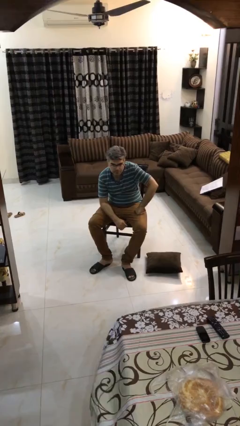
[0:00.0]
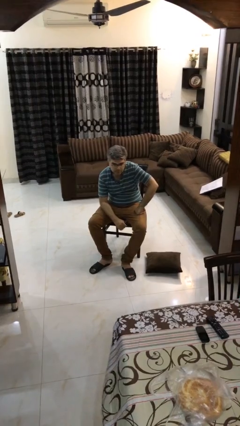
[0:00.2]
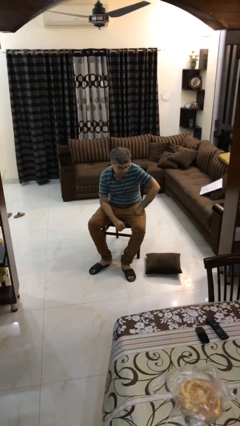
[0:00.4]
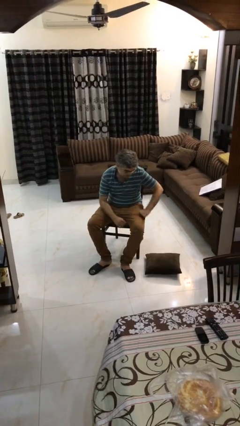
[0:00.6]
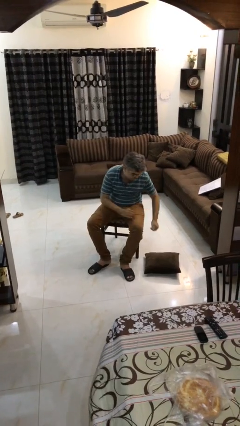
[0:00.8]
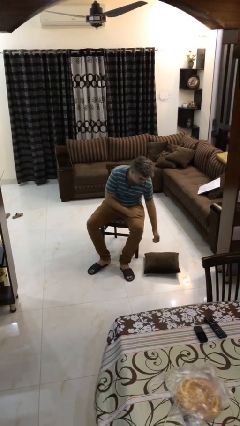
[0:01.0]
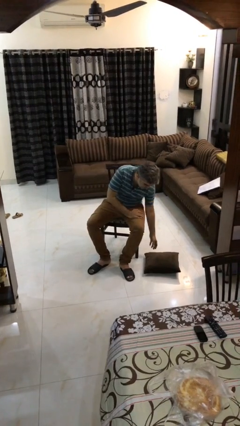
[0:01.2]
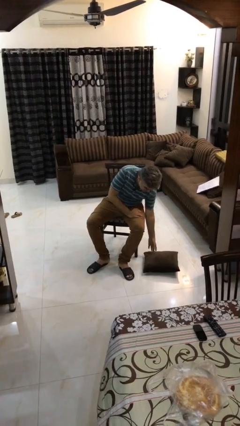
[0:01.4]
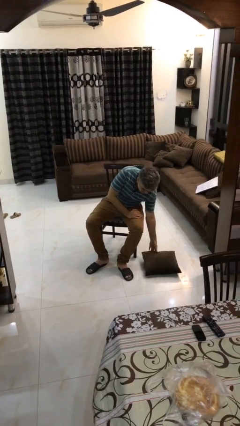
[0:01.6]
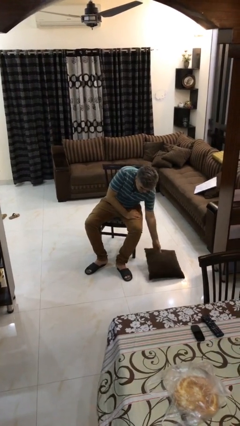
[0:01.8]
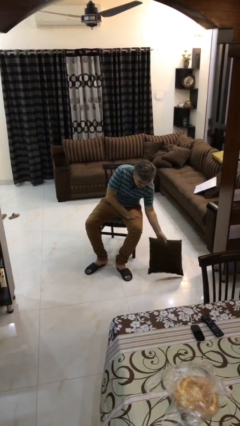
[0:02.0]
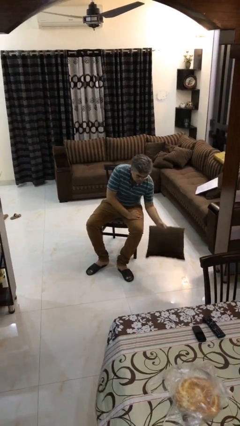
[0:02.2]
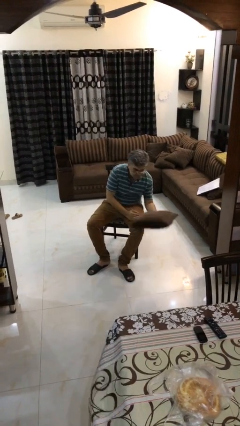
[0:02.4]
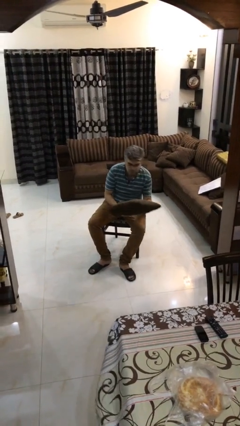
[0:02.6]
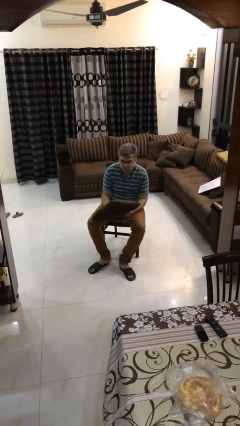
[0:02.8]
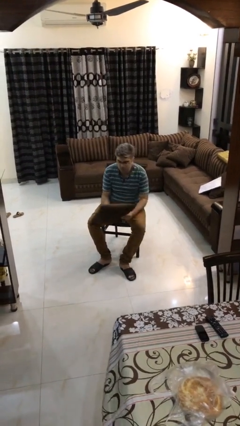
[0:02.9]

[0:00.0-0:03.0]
person picks up object from floor

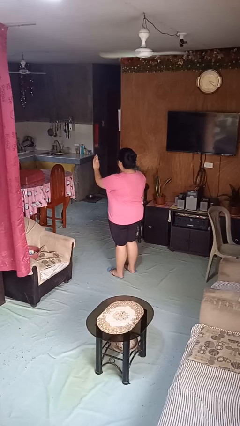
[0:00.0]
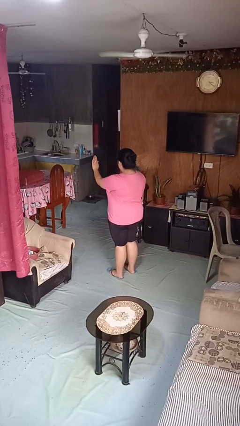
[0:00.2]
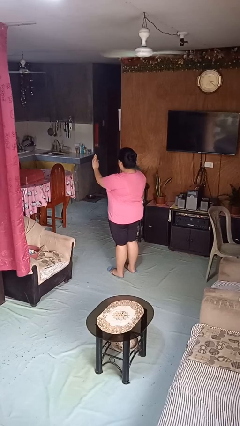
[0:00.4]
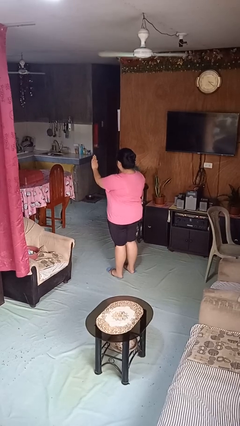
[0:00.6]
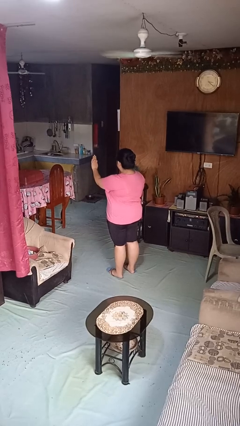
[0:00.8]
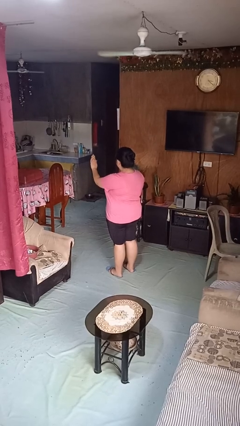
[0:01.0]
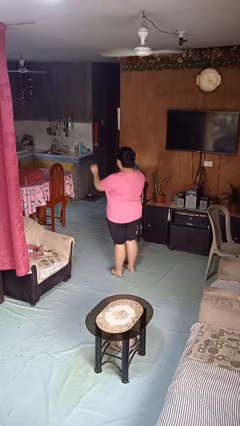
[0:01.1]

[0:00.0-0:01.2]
person gestures stop

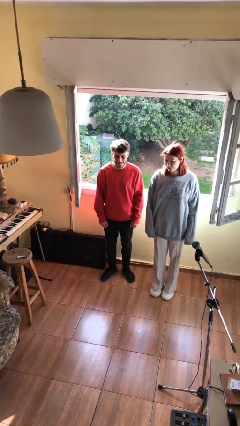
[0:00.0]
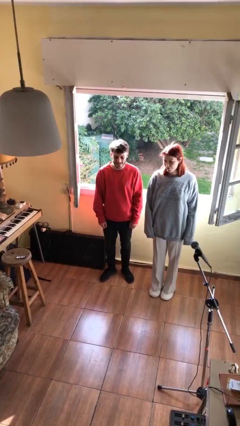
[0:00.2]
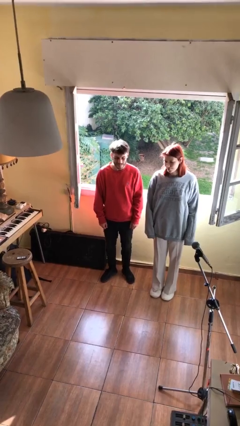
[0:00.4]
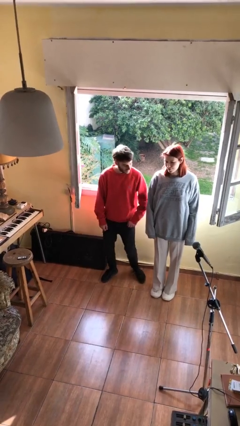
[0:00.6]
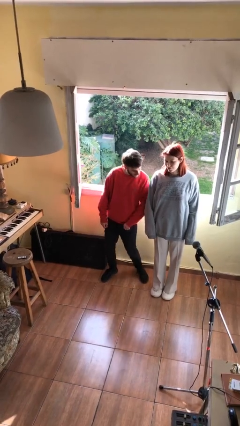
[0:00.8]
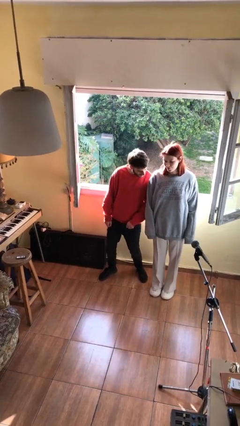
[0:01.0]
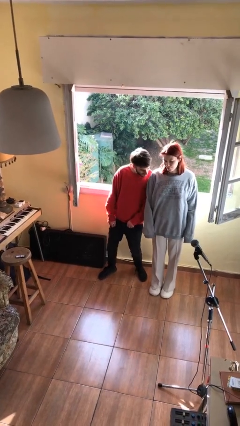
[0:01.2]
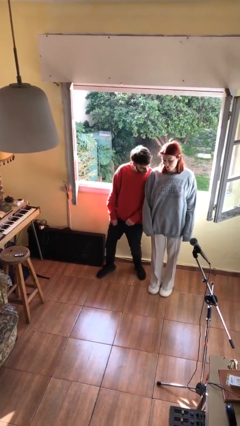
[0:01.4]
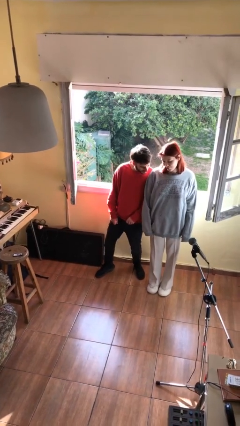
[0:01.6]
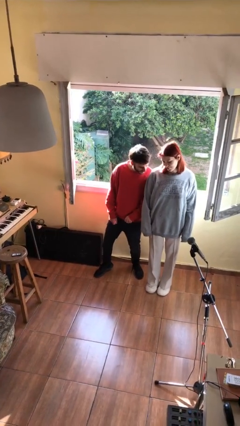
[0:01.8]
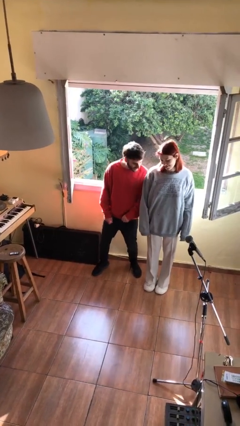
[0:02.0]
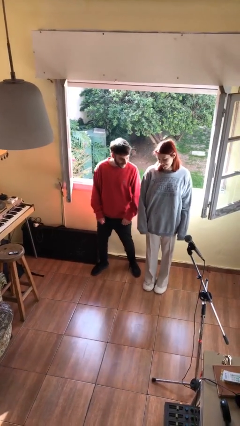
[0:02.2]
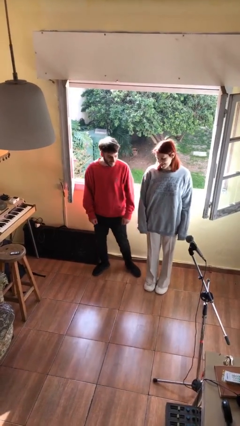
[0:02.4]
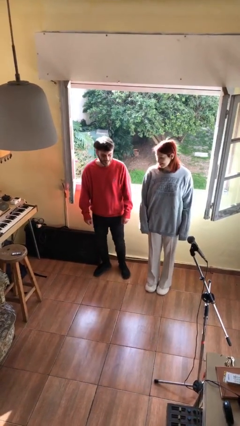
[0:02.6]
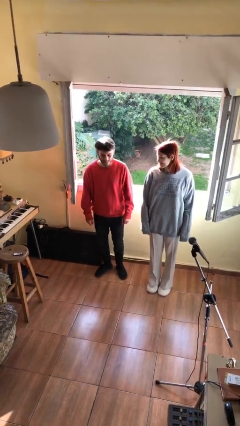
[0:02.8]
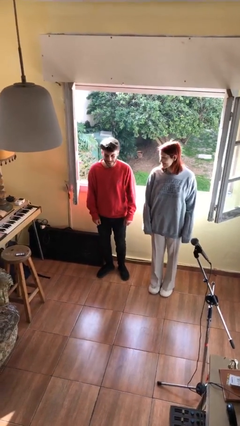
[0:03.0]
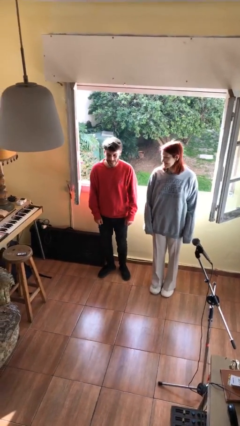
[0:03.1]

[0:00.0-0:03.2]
person nudges person with elbow

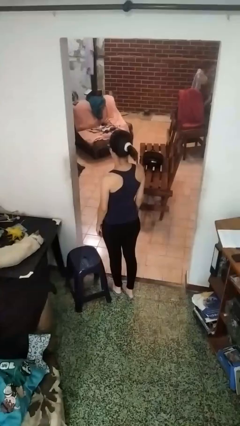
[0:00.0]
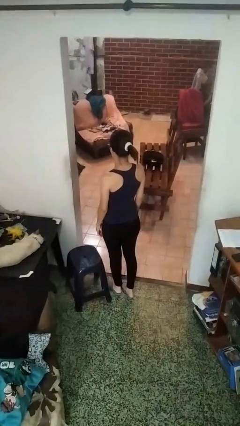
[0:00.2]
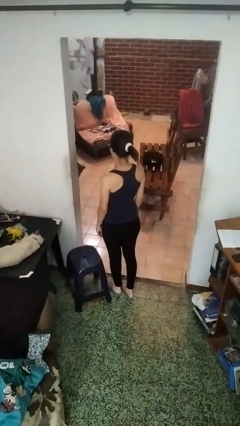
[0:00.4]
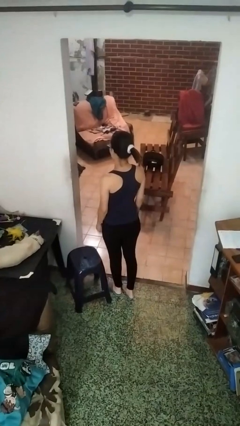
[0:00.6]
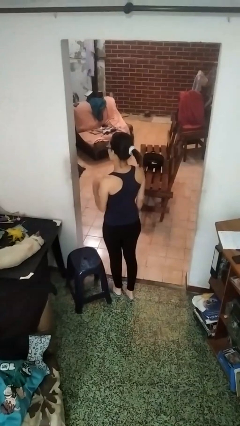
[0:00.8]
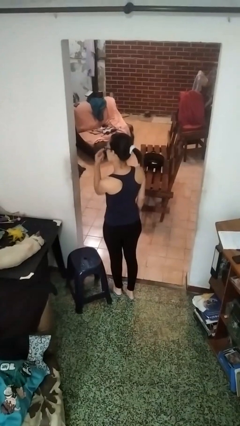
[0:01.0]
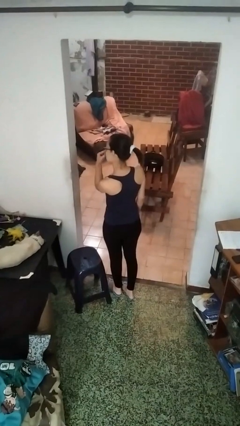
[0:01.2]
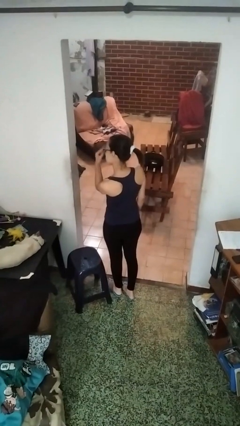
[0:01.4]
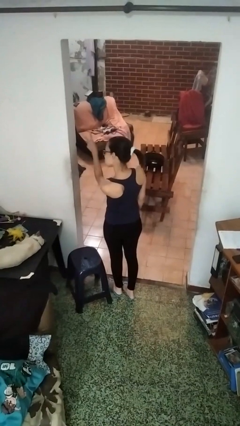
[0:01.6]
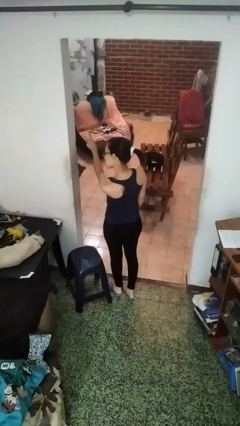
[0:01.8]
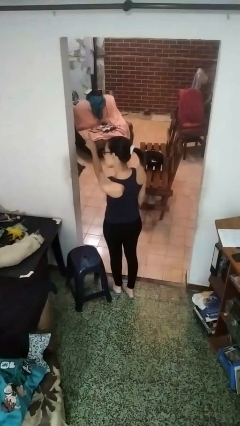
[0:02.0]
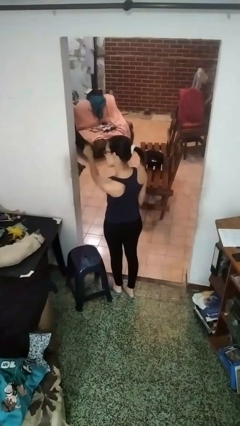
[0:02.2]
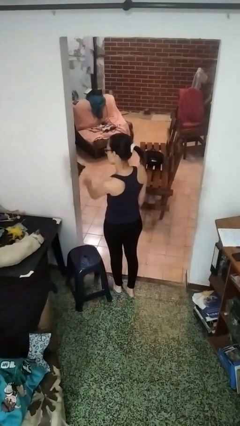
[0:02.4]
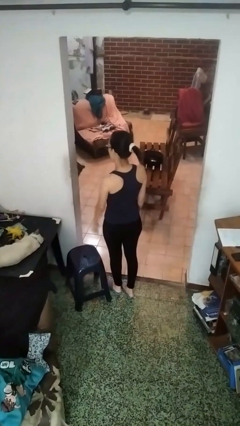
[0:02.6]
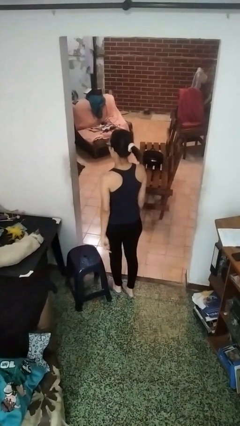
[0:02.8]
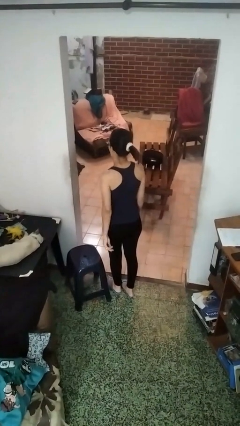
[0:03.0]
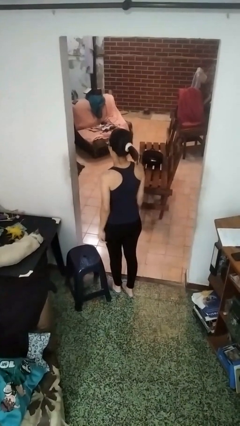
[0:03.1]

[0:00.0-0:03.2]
person gestures watch closely

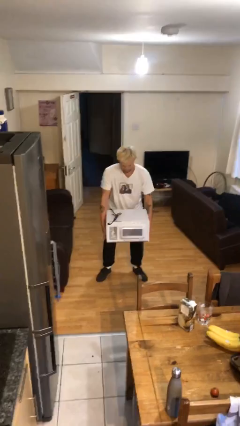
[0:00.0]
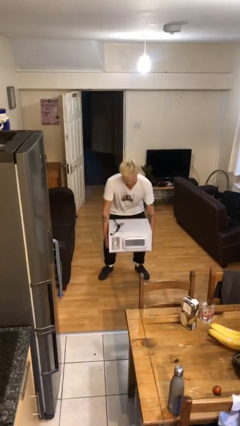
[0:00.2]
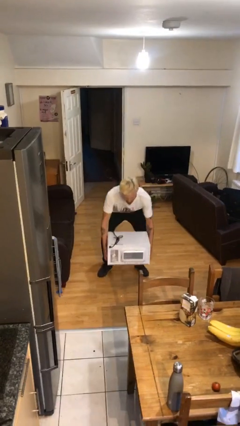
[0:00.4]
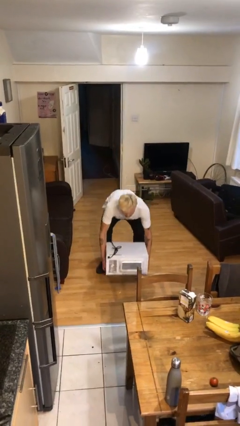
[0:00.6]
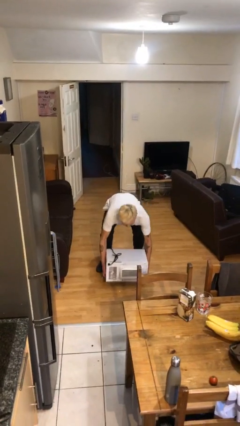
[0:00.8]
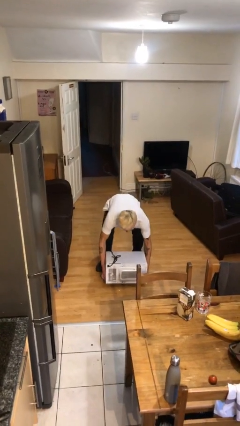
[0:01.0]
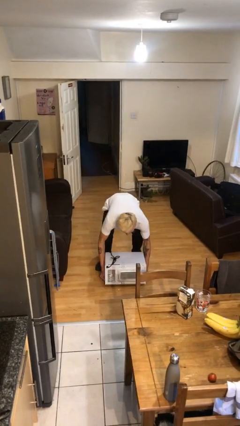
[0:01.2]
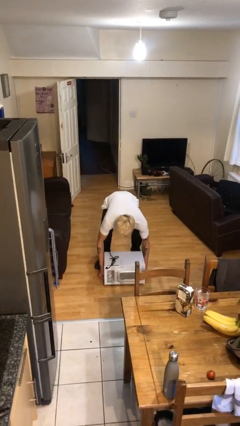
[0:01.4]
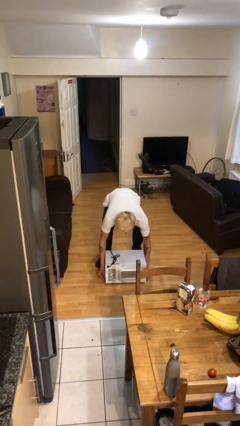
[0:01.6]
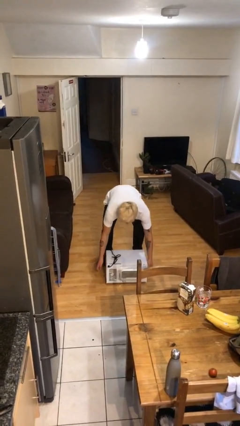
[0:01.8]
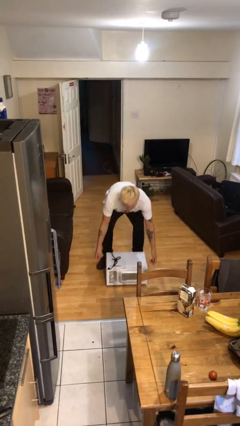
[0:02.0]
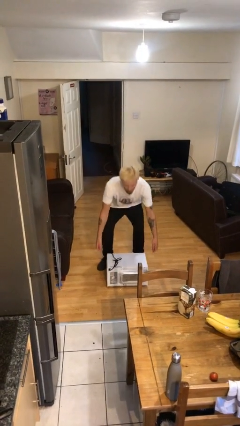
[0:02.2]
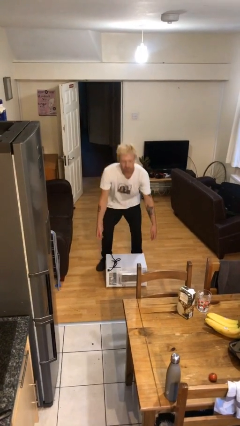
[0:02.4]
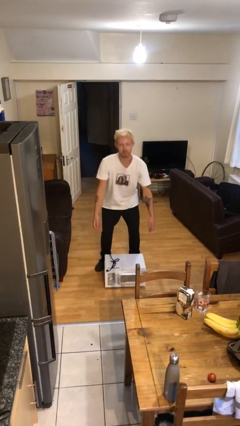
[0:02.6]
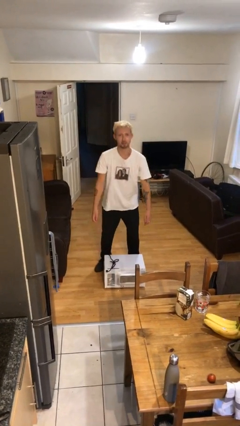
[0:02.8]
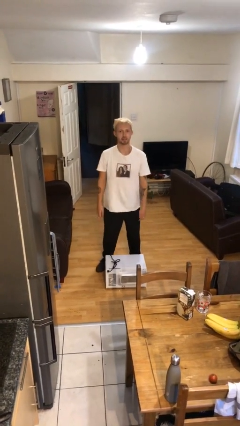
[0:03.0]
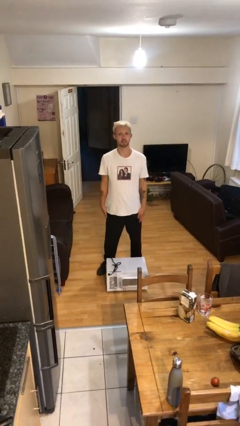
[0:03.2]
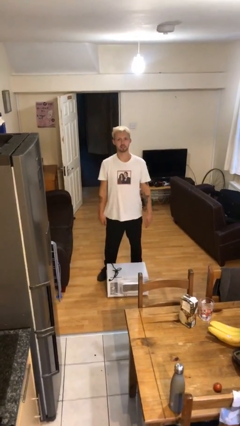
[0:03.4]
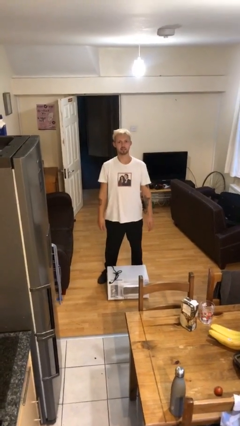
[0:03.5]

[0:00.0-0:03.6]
person puts down object on floor

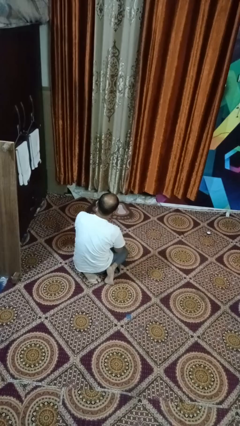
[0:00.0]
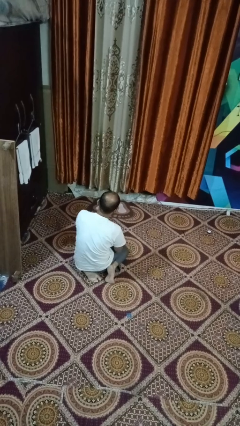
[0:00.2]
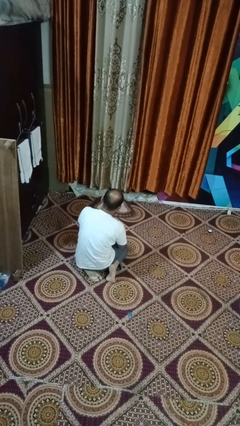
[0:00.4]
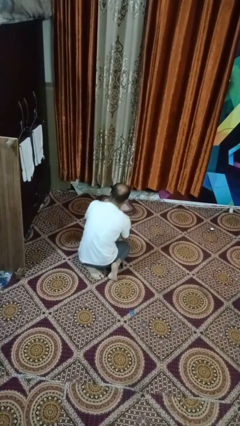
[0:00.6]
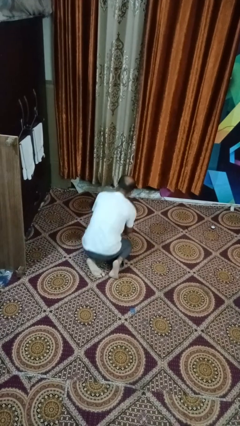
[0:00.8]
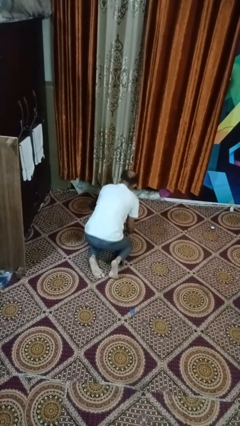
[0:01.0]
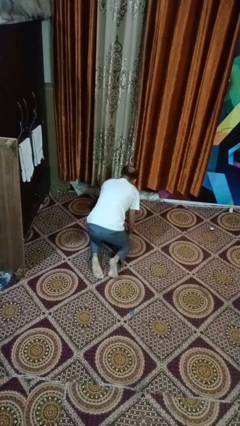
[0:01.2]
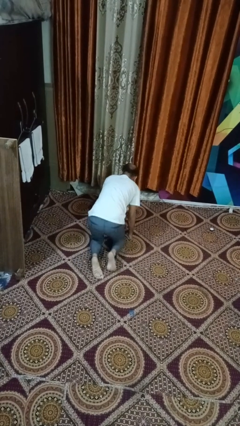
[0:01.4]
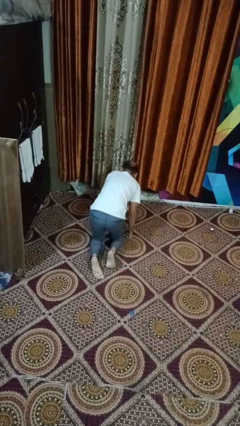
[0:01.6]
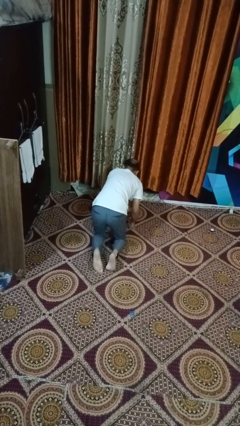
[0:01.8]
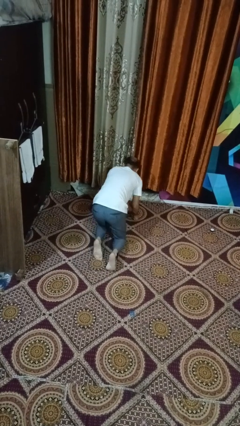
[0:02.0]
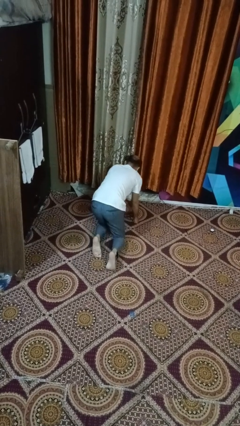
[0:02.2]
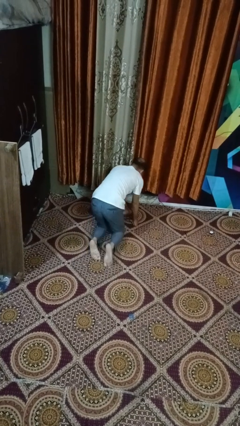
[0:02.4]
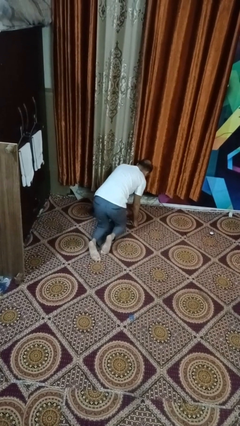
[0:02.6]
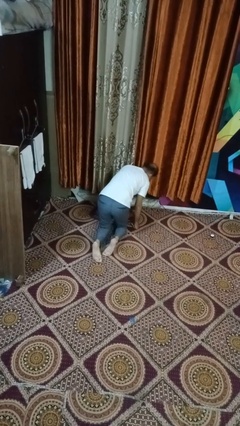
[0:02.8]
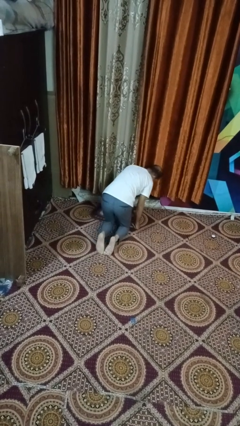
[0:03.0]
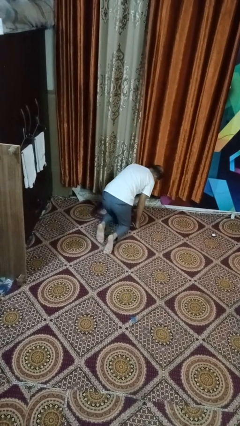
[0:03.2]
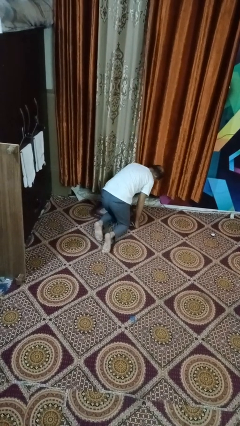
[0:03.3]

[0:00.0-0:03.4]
person crawls

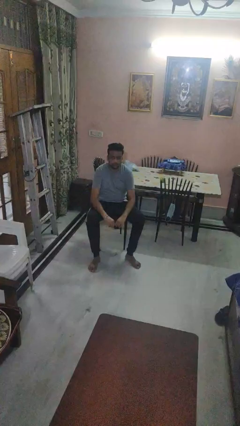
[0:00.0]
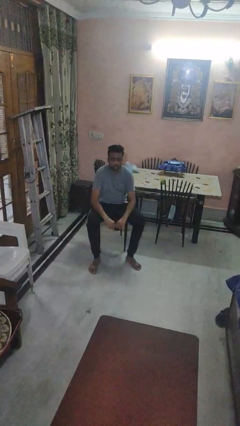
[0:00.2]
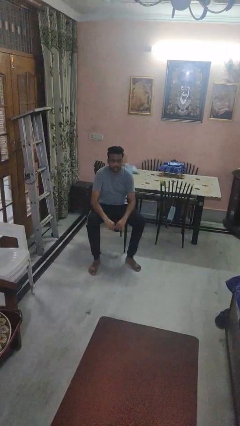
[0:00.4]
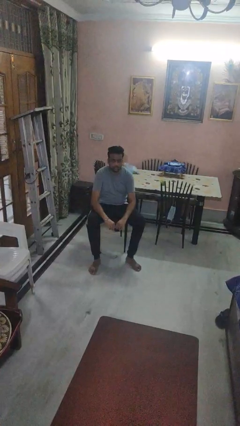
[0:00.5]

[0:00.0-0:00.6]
person falls while standing
